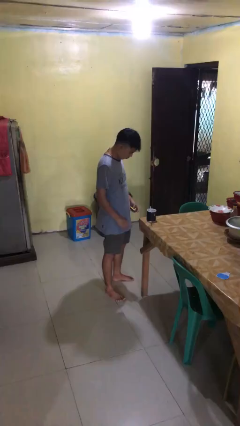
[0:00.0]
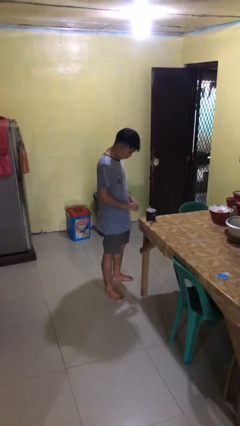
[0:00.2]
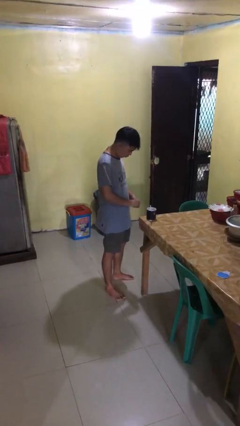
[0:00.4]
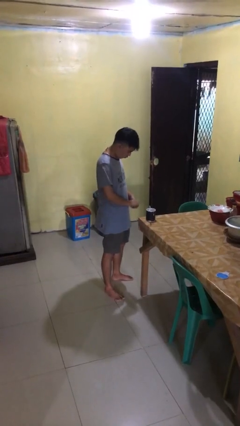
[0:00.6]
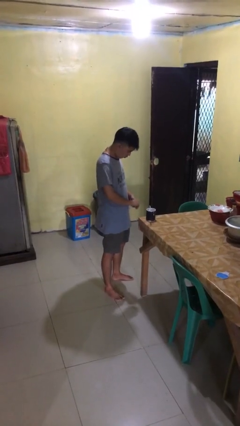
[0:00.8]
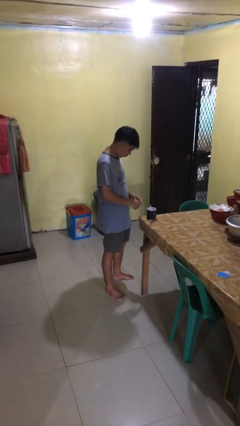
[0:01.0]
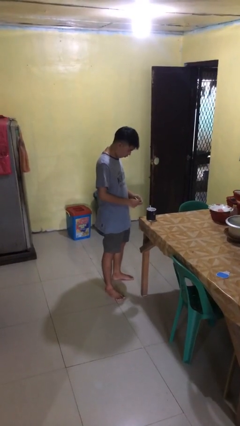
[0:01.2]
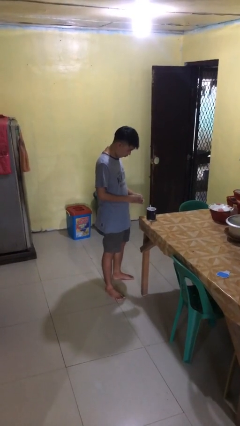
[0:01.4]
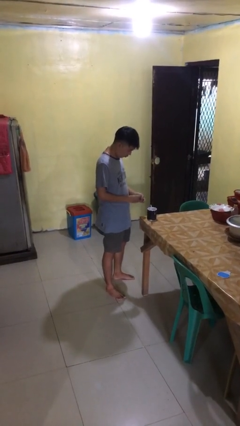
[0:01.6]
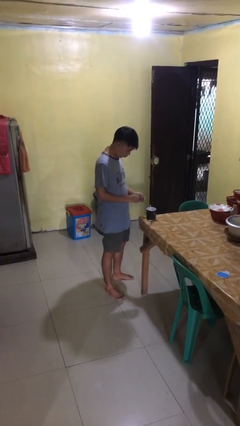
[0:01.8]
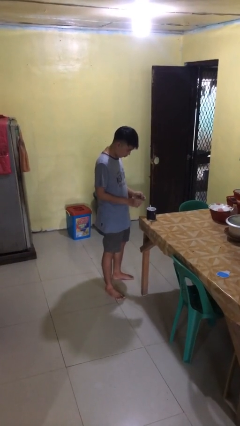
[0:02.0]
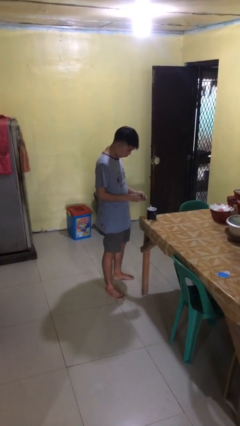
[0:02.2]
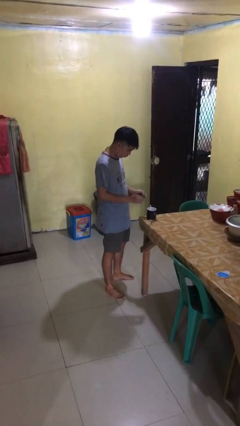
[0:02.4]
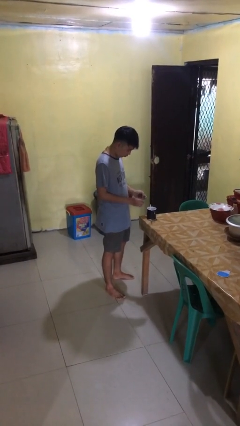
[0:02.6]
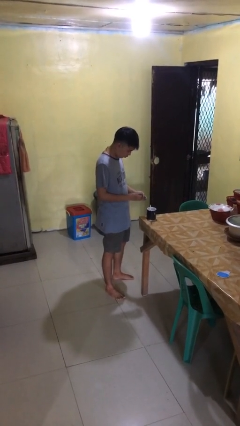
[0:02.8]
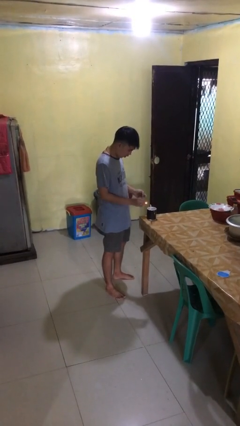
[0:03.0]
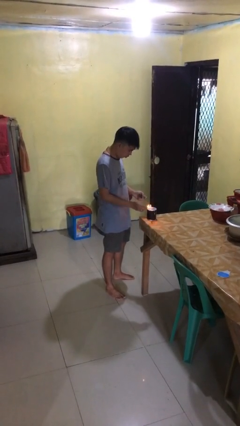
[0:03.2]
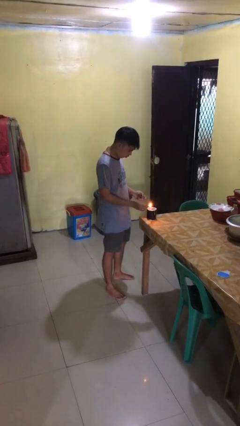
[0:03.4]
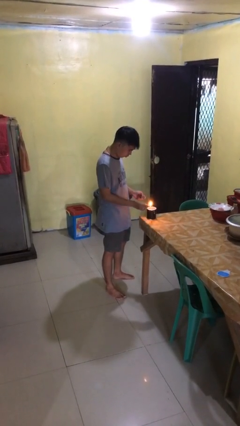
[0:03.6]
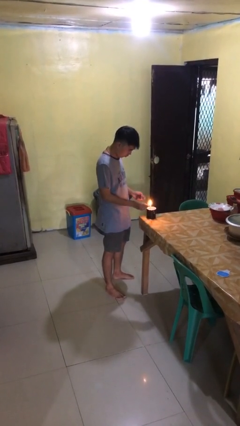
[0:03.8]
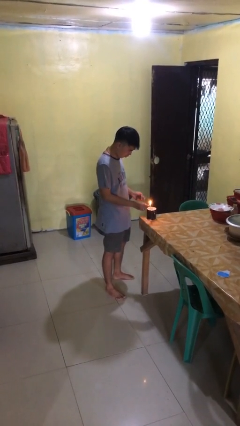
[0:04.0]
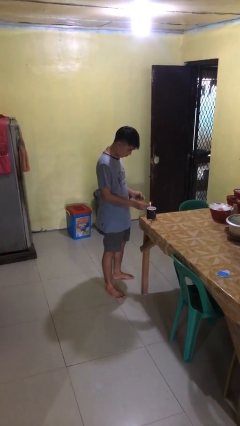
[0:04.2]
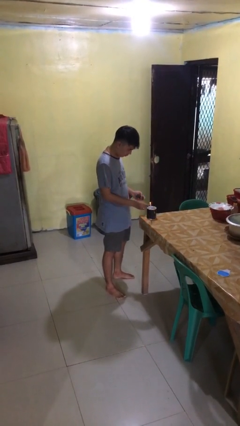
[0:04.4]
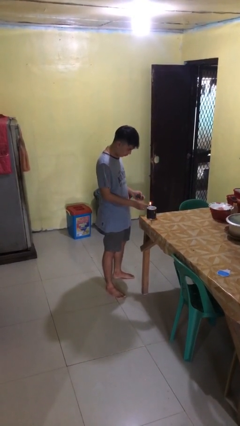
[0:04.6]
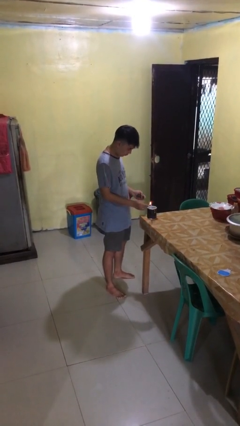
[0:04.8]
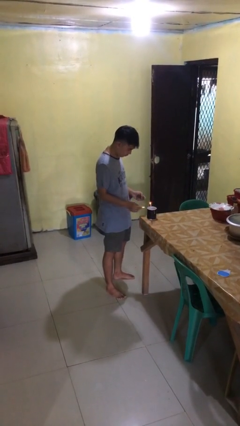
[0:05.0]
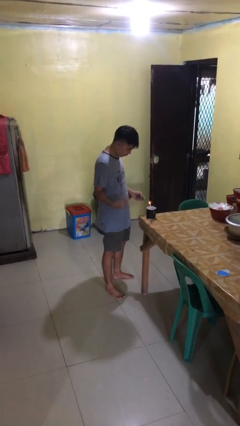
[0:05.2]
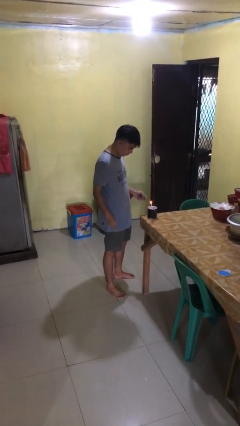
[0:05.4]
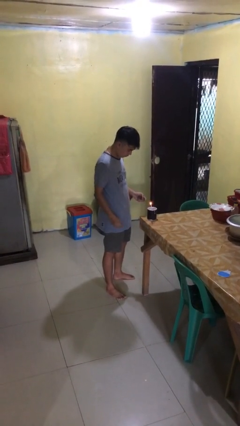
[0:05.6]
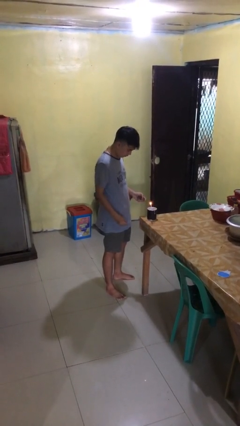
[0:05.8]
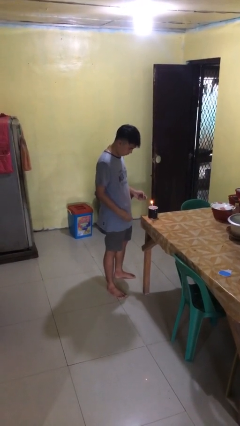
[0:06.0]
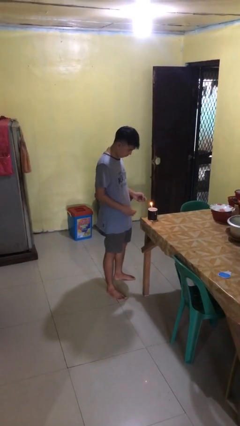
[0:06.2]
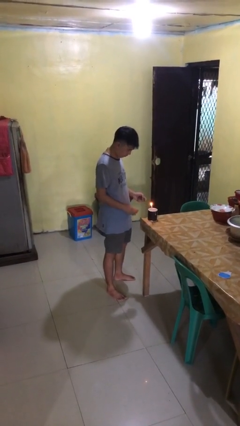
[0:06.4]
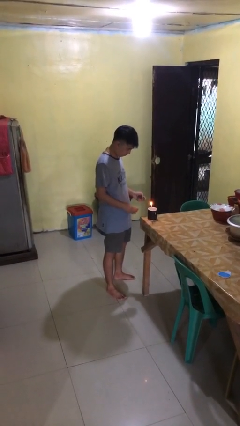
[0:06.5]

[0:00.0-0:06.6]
person lights candle

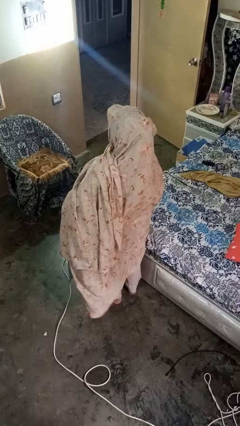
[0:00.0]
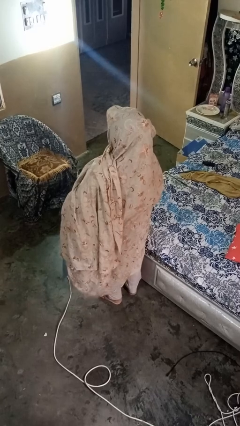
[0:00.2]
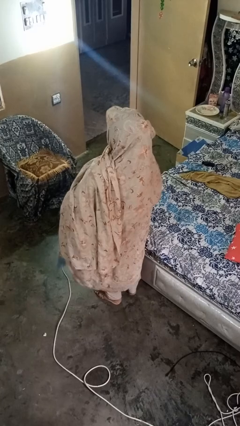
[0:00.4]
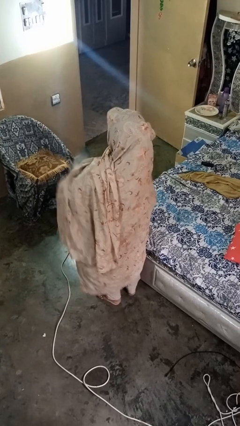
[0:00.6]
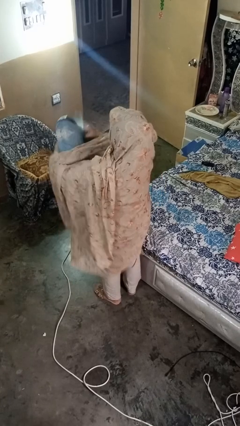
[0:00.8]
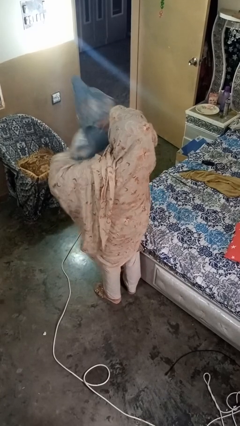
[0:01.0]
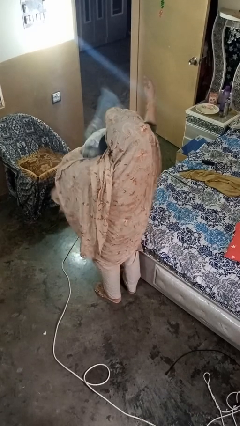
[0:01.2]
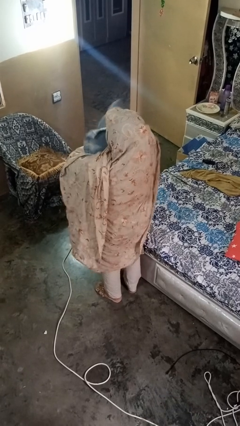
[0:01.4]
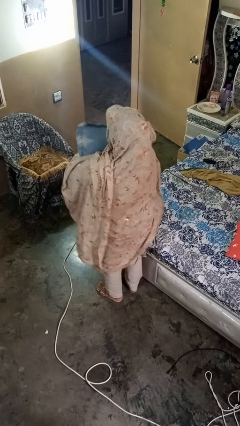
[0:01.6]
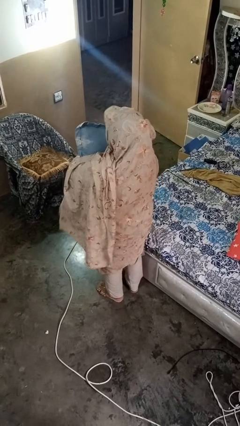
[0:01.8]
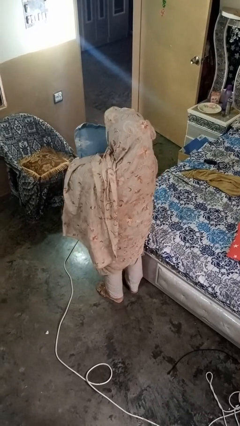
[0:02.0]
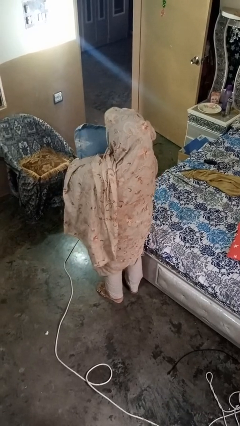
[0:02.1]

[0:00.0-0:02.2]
person squeezes object

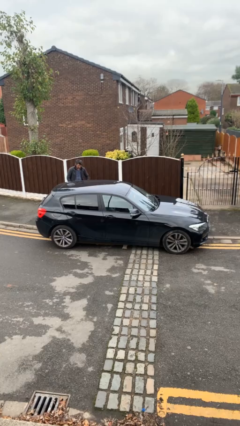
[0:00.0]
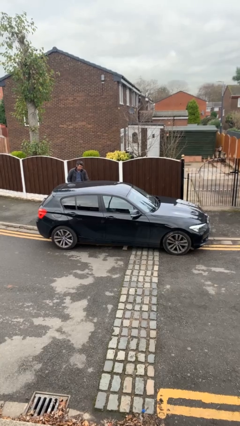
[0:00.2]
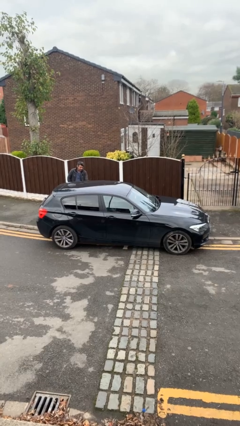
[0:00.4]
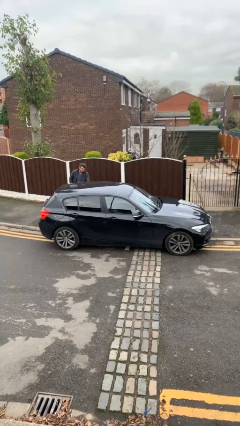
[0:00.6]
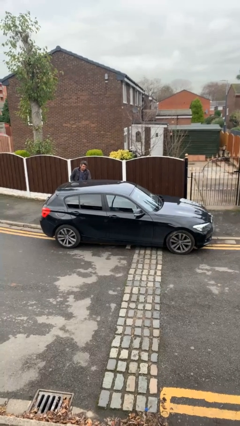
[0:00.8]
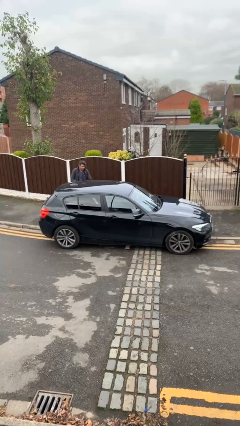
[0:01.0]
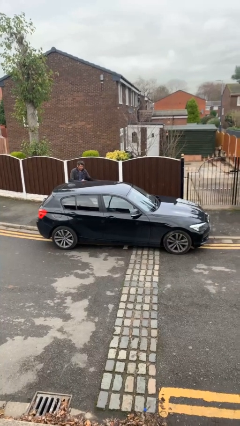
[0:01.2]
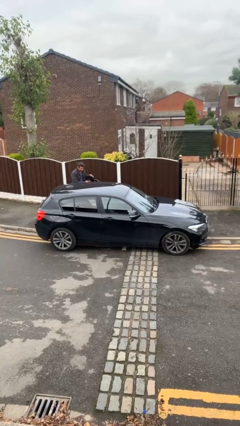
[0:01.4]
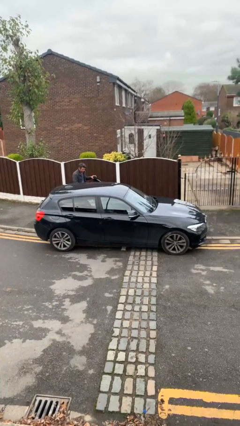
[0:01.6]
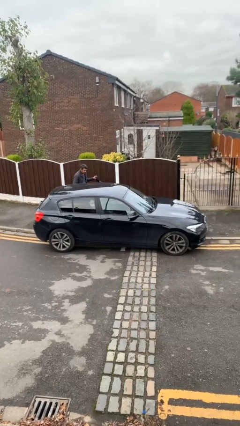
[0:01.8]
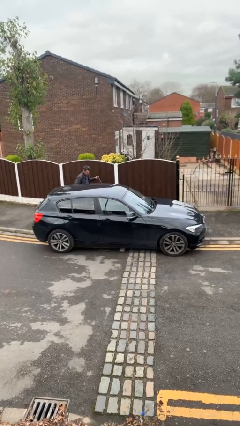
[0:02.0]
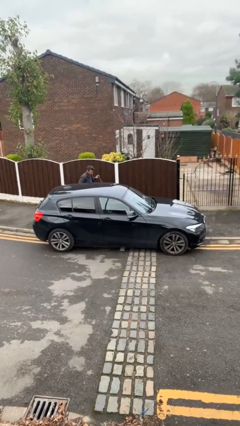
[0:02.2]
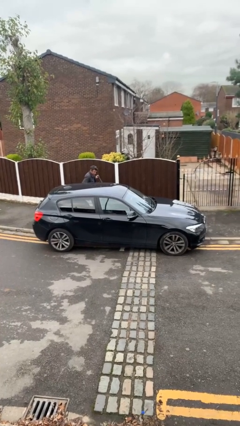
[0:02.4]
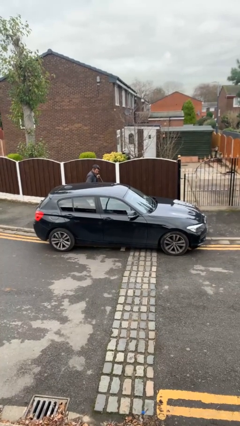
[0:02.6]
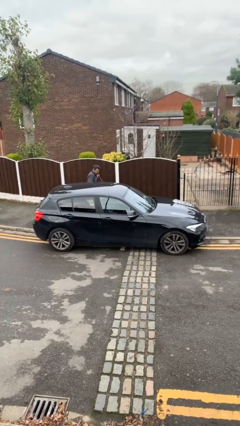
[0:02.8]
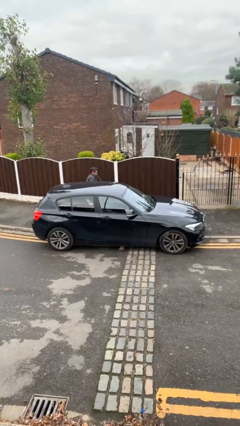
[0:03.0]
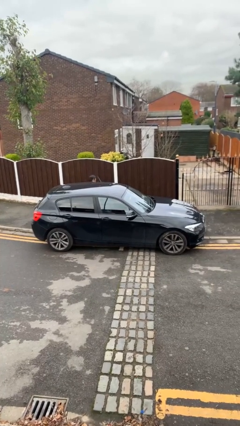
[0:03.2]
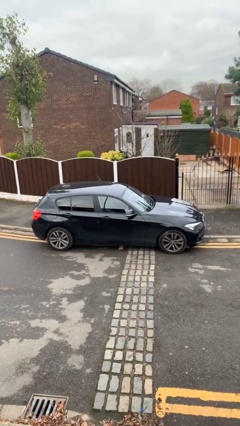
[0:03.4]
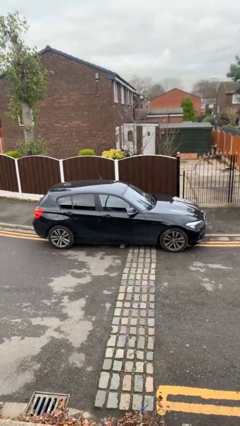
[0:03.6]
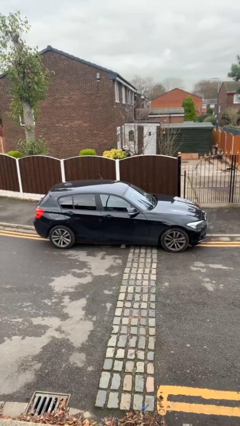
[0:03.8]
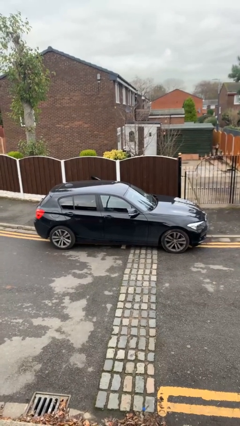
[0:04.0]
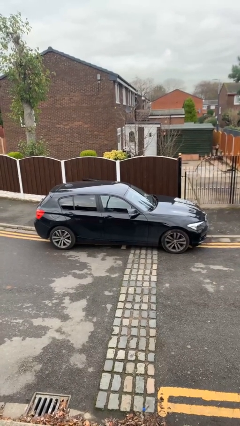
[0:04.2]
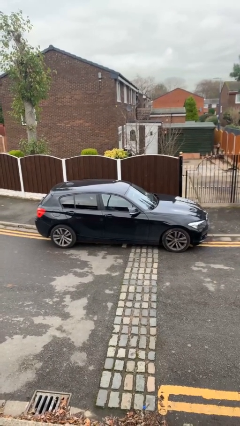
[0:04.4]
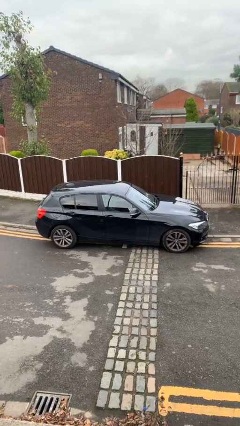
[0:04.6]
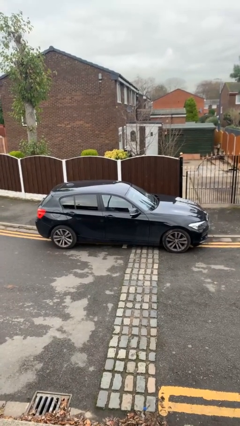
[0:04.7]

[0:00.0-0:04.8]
car picks up person

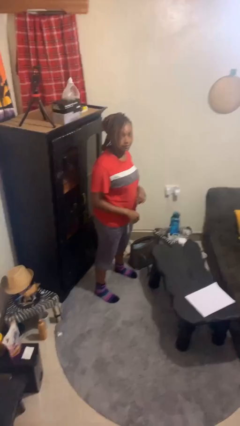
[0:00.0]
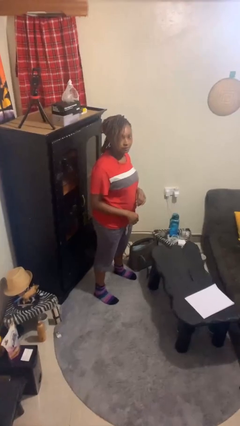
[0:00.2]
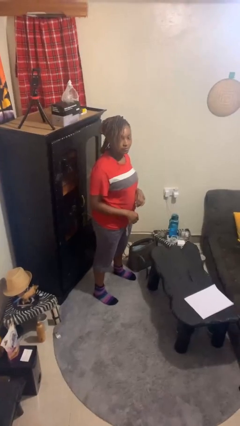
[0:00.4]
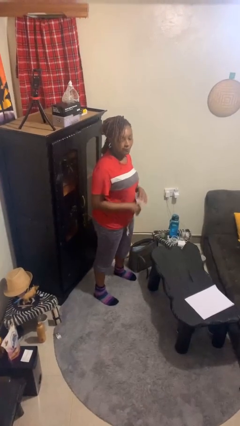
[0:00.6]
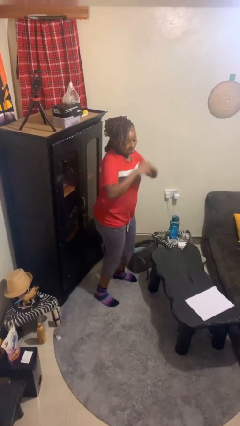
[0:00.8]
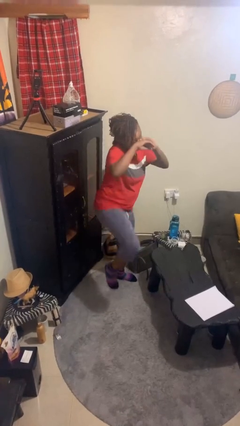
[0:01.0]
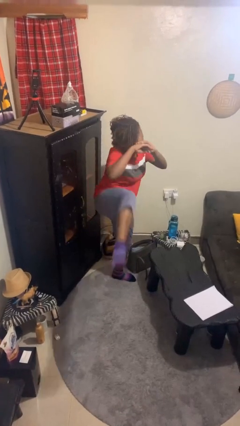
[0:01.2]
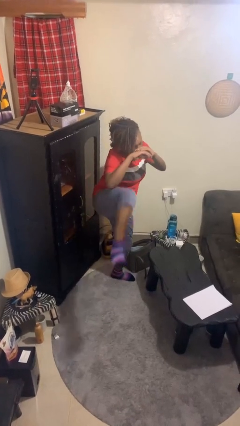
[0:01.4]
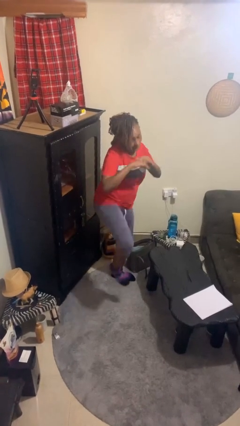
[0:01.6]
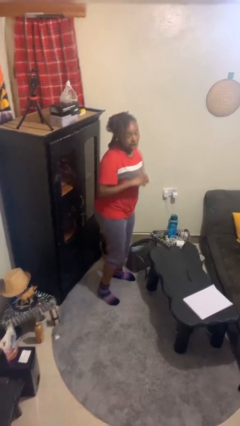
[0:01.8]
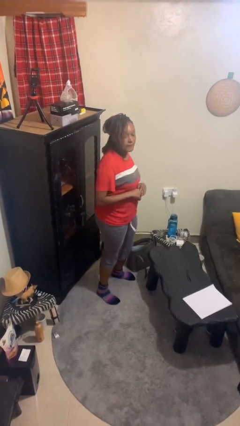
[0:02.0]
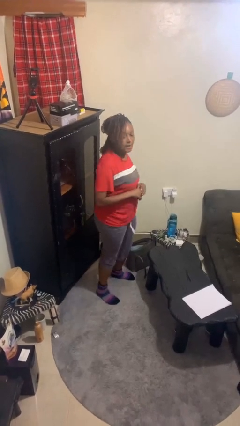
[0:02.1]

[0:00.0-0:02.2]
person karate kicks

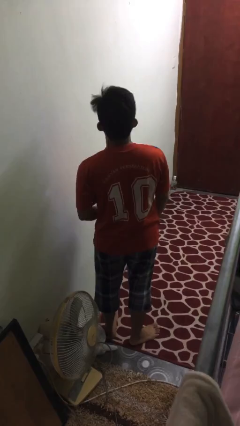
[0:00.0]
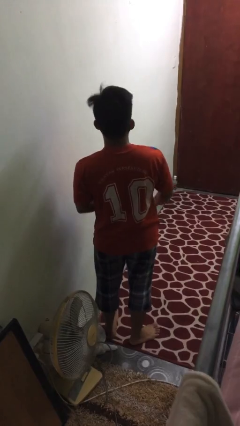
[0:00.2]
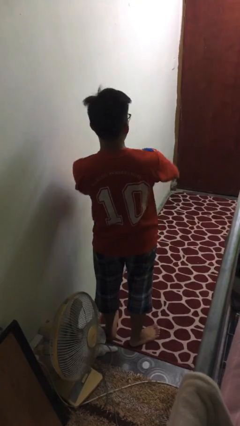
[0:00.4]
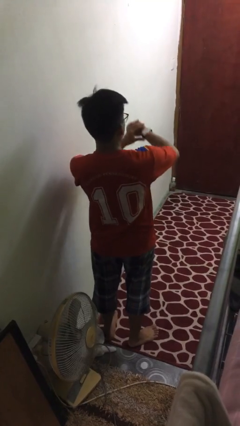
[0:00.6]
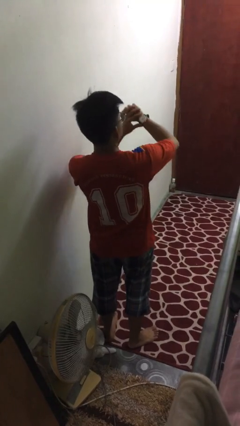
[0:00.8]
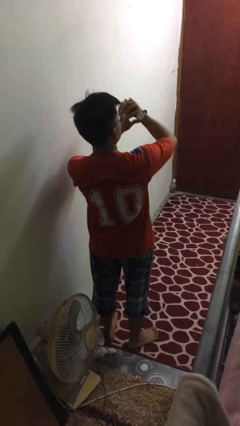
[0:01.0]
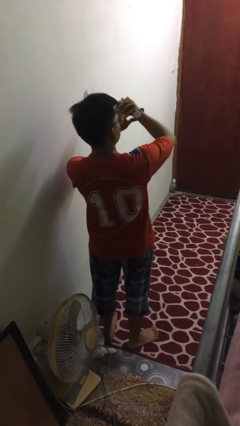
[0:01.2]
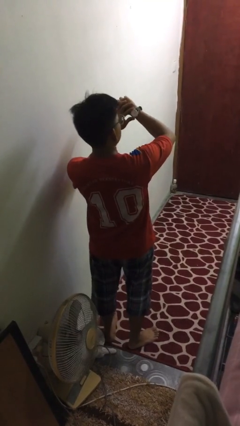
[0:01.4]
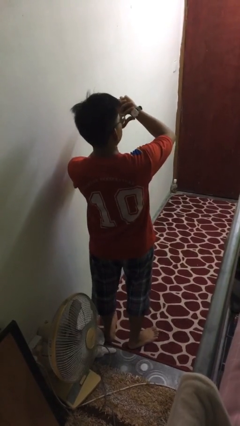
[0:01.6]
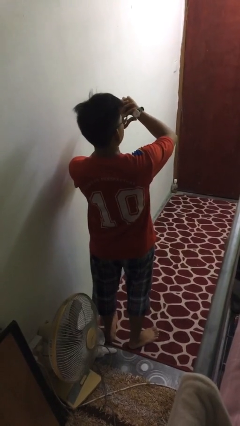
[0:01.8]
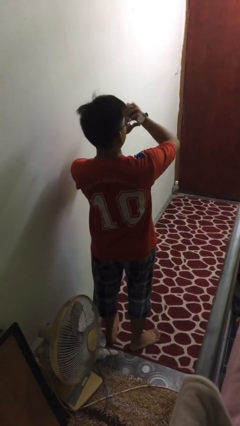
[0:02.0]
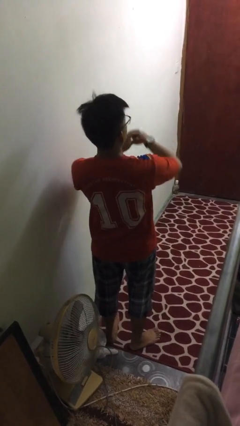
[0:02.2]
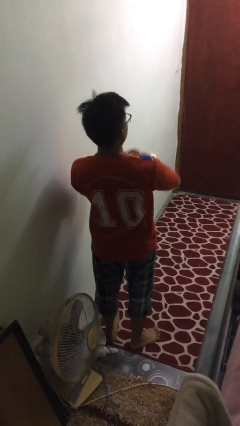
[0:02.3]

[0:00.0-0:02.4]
person looks at wristwatch
